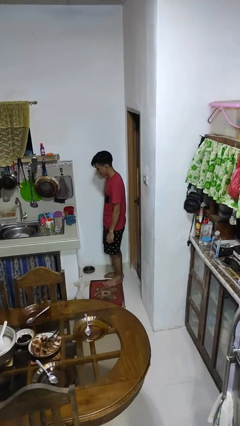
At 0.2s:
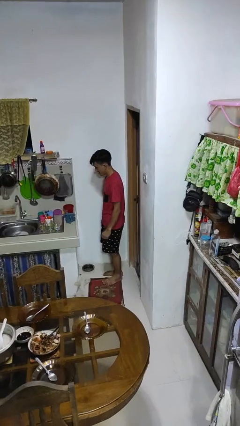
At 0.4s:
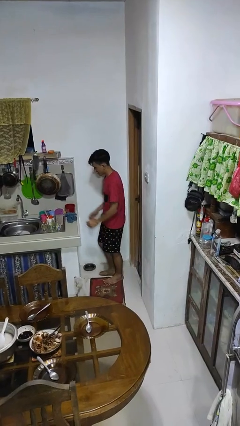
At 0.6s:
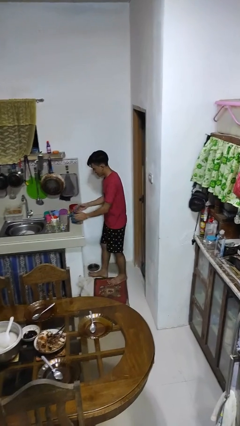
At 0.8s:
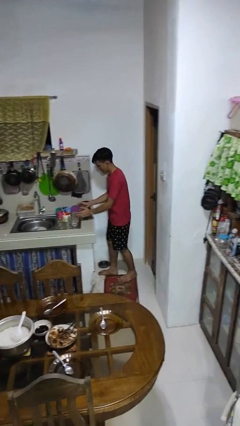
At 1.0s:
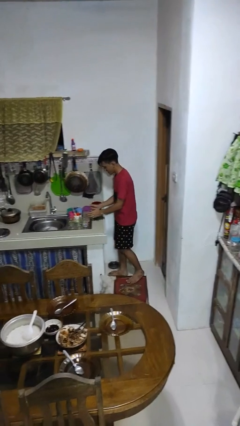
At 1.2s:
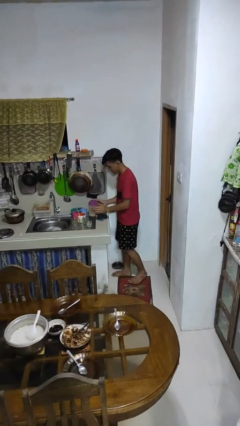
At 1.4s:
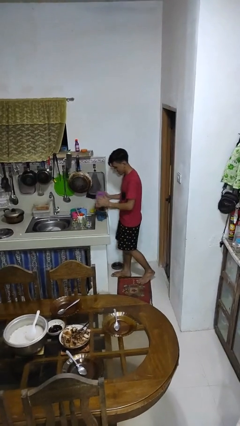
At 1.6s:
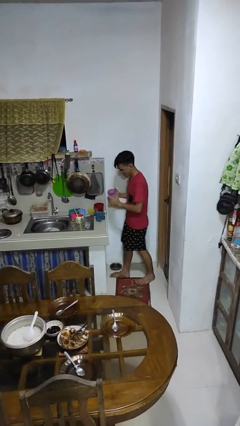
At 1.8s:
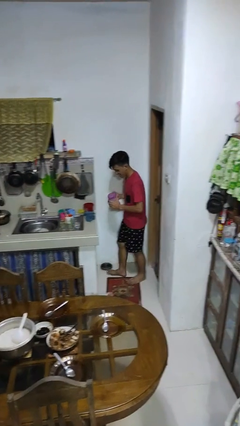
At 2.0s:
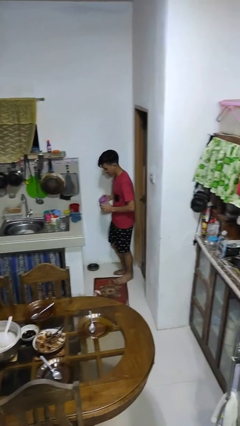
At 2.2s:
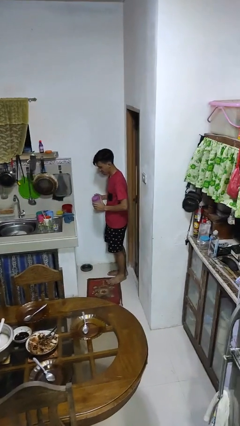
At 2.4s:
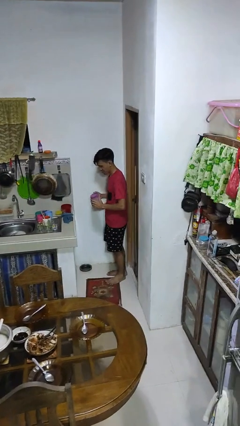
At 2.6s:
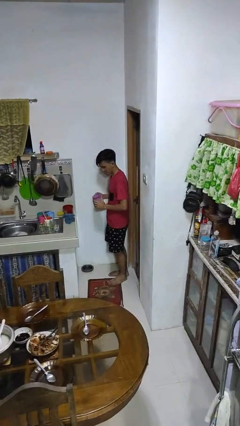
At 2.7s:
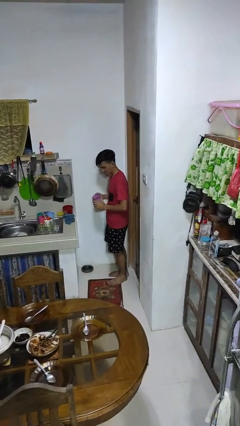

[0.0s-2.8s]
person picks up object from countertop

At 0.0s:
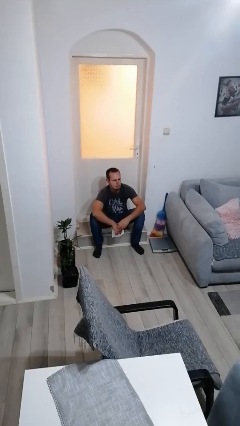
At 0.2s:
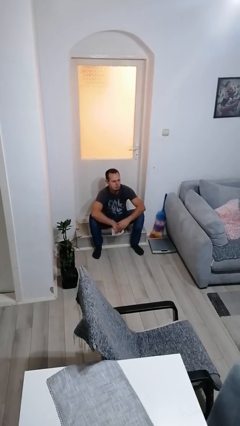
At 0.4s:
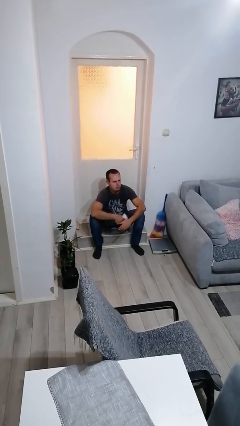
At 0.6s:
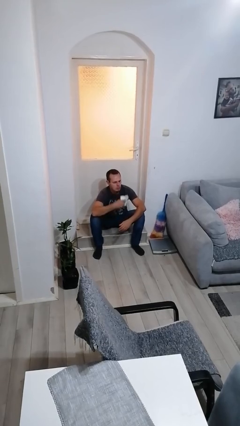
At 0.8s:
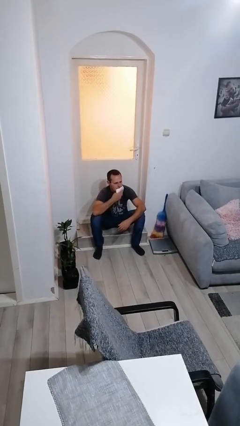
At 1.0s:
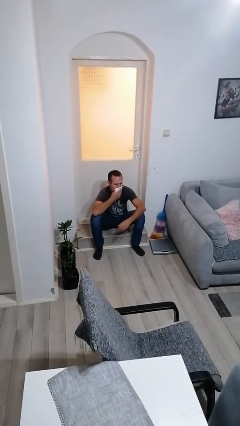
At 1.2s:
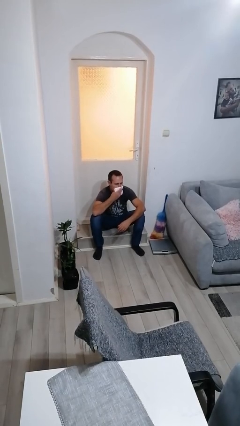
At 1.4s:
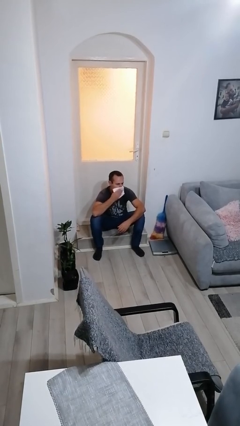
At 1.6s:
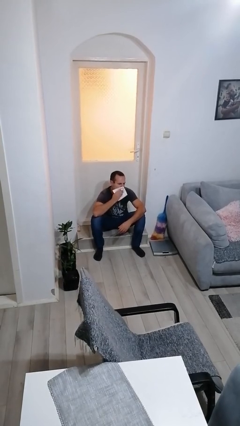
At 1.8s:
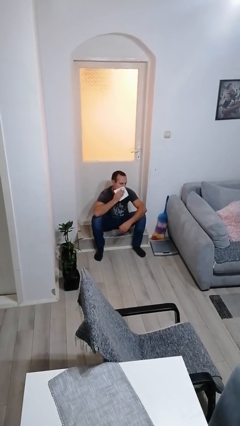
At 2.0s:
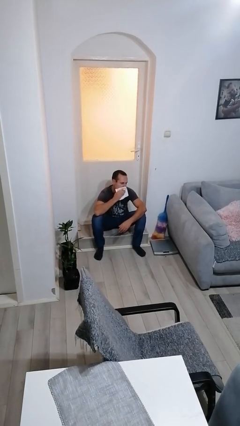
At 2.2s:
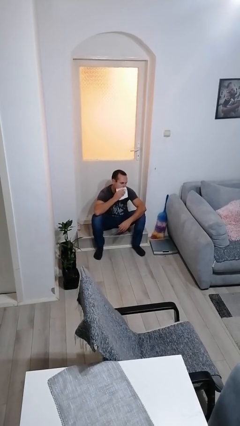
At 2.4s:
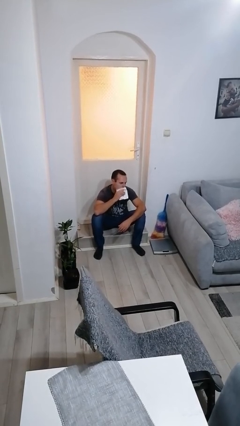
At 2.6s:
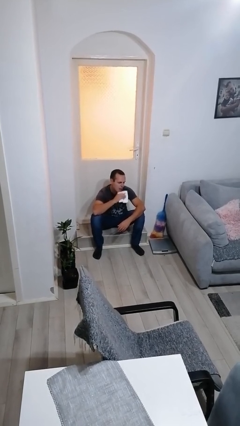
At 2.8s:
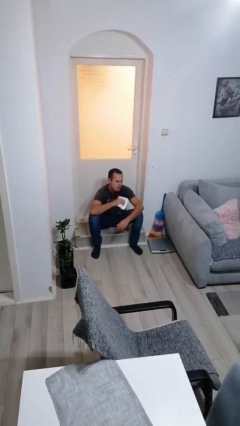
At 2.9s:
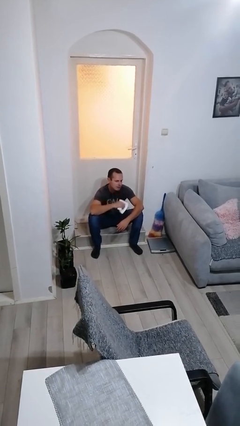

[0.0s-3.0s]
person wipes mouth with napkin

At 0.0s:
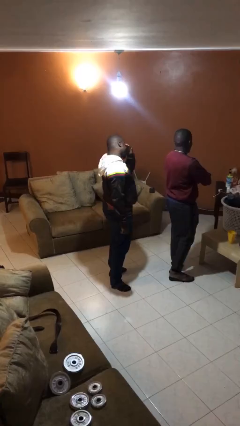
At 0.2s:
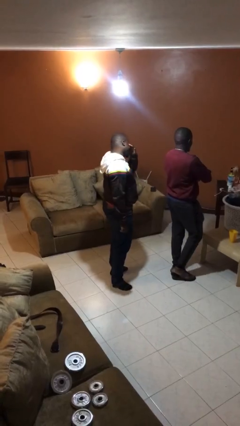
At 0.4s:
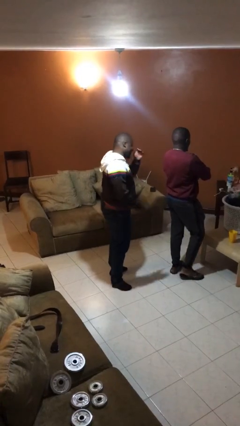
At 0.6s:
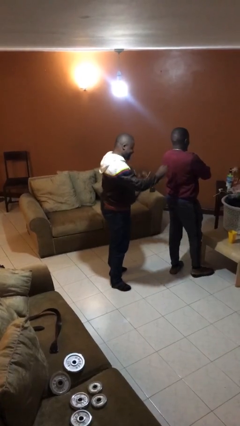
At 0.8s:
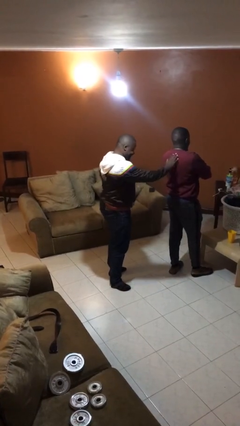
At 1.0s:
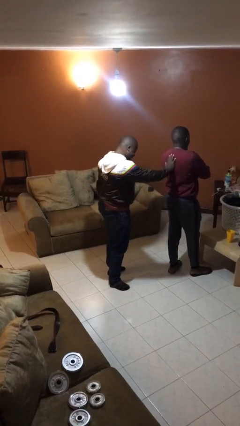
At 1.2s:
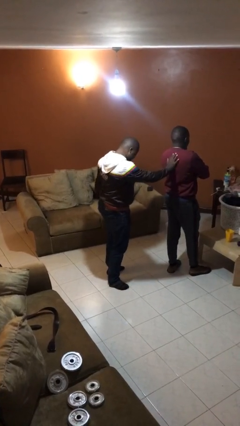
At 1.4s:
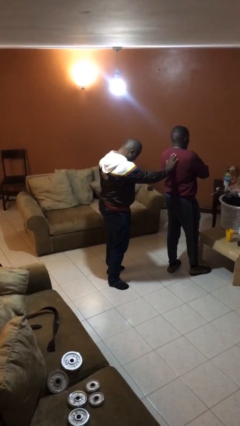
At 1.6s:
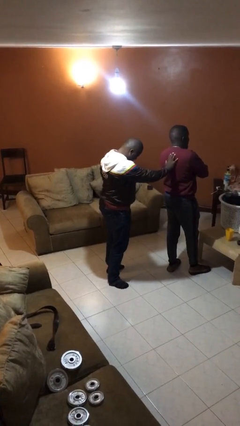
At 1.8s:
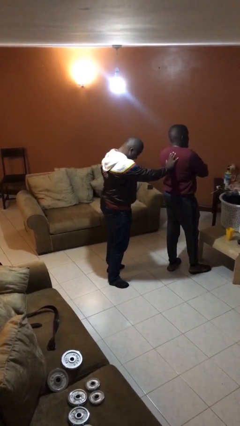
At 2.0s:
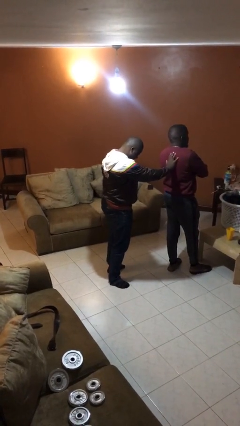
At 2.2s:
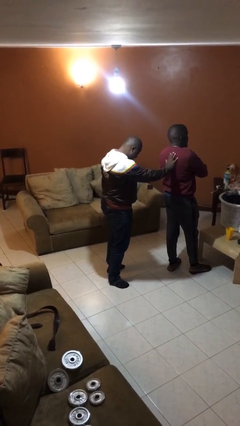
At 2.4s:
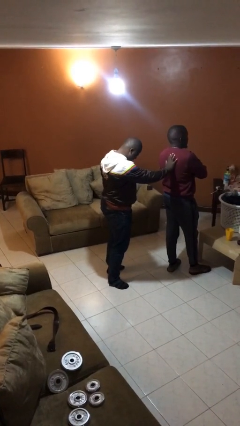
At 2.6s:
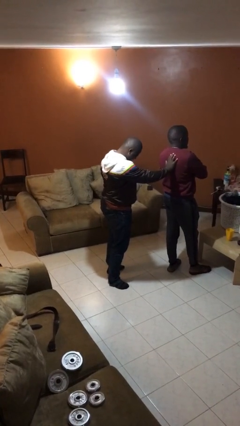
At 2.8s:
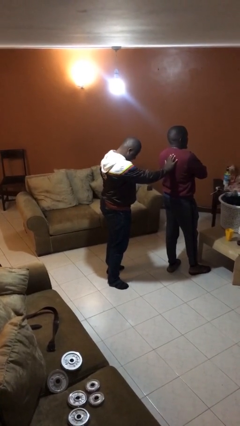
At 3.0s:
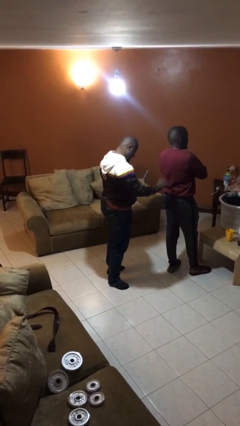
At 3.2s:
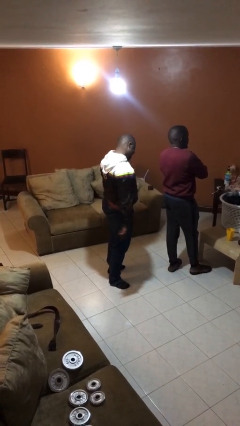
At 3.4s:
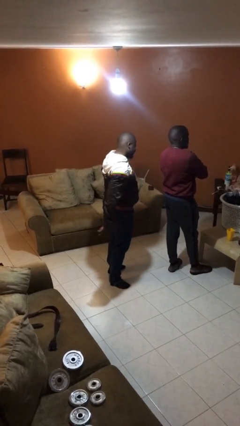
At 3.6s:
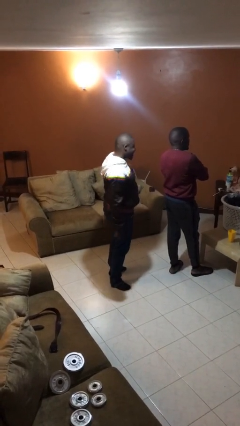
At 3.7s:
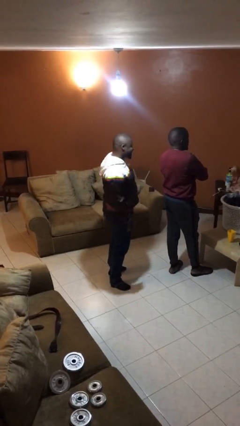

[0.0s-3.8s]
person touches back of person

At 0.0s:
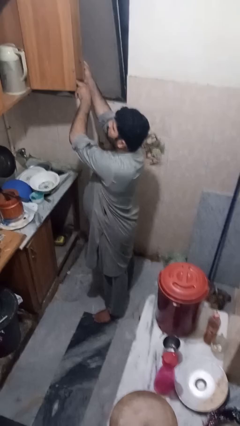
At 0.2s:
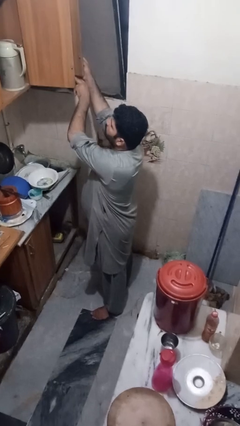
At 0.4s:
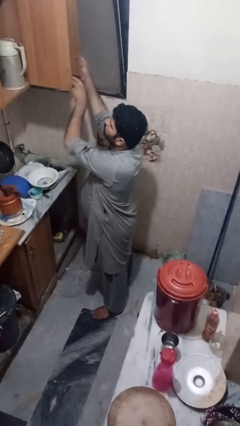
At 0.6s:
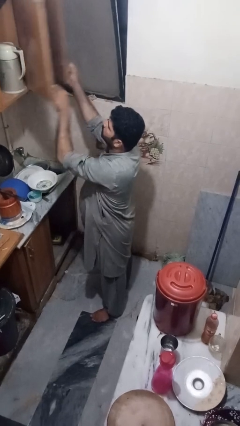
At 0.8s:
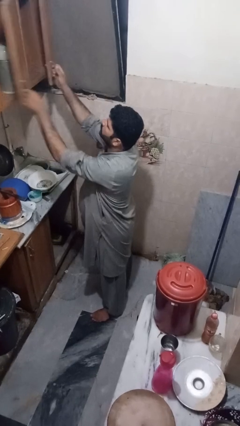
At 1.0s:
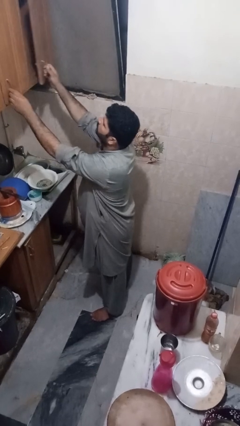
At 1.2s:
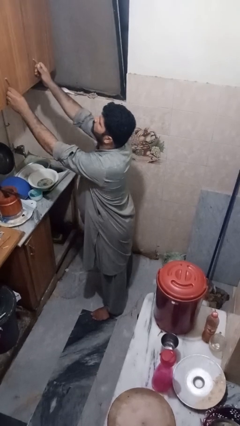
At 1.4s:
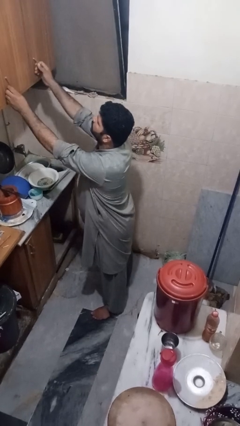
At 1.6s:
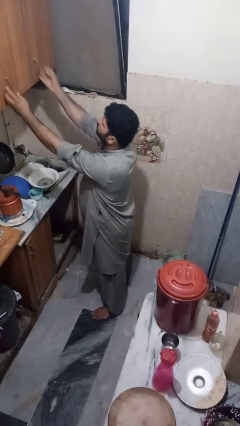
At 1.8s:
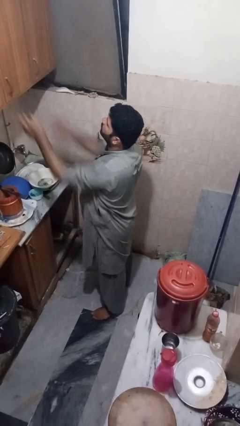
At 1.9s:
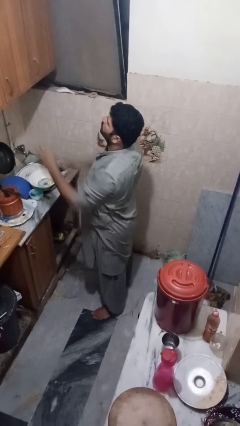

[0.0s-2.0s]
person closes cabinet

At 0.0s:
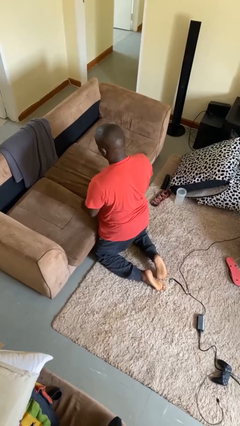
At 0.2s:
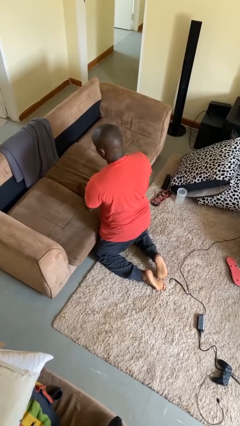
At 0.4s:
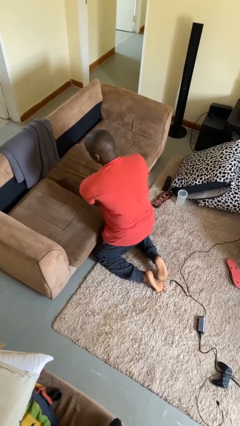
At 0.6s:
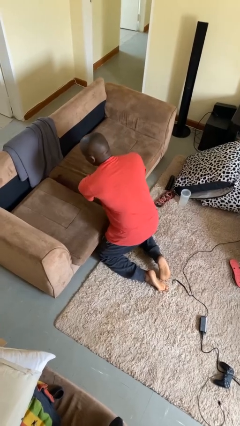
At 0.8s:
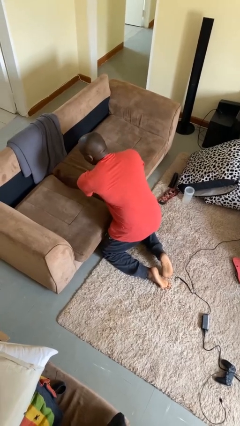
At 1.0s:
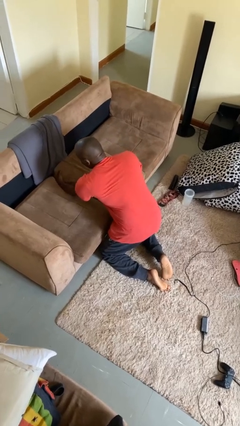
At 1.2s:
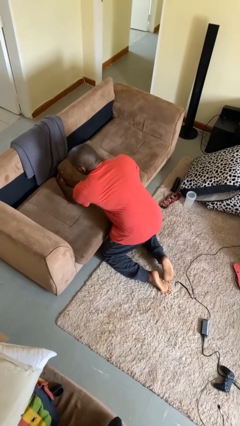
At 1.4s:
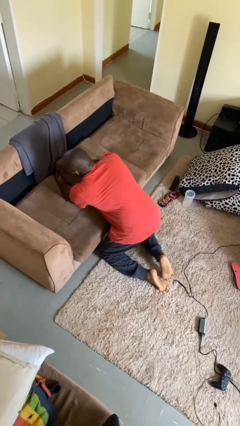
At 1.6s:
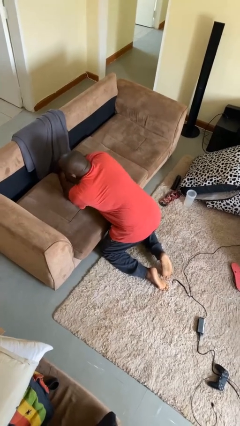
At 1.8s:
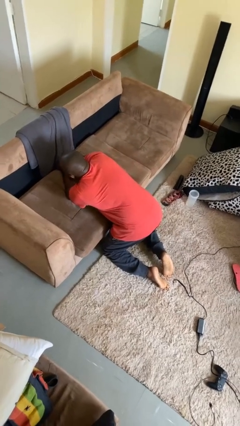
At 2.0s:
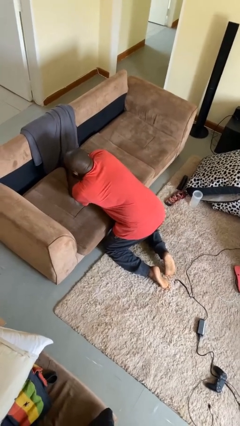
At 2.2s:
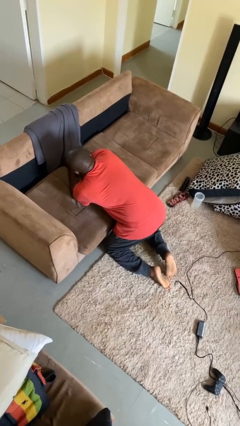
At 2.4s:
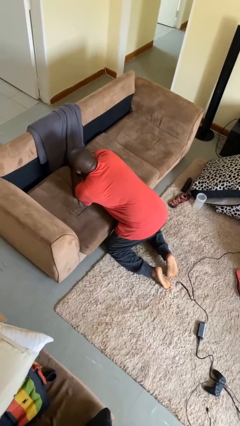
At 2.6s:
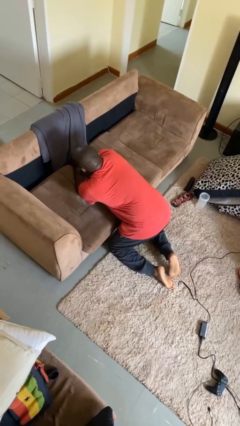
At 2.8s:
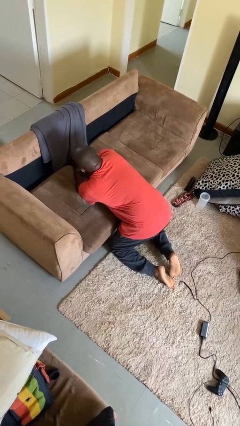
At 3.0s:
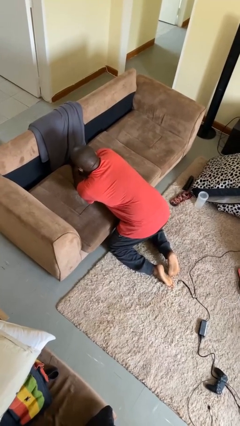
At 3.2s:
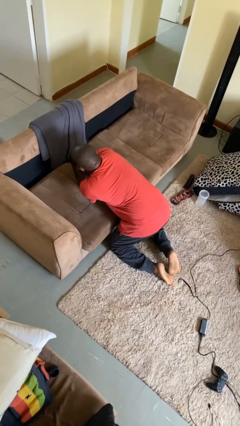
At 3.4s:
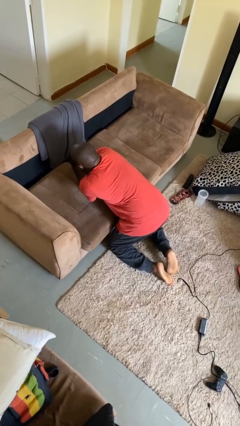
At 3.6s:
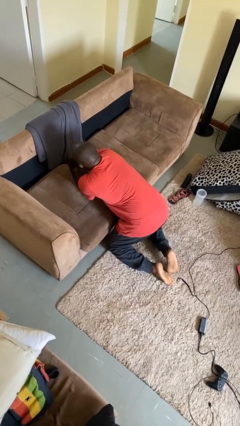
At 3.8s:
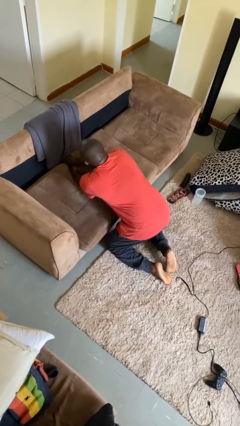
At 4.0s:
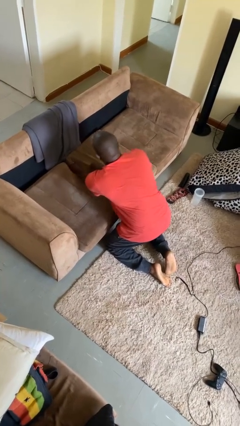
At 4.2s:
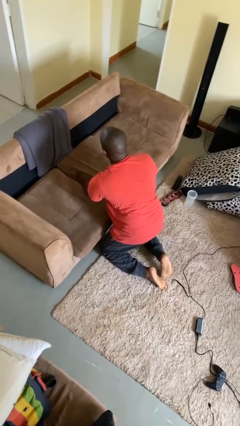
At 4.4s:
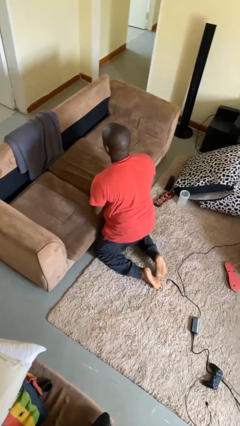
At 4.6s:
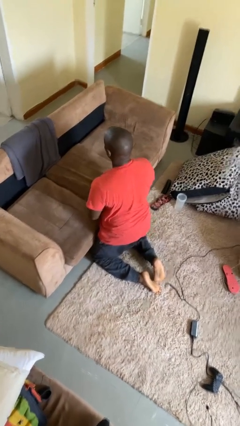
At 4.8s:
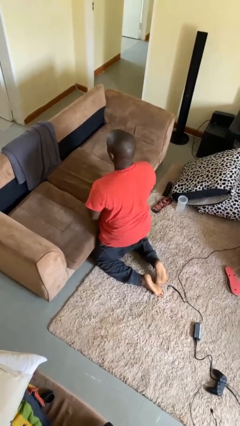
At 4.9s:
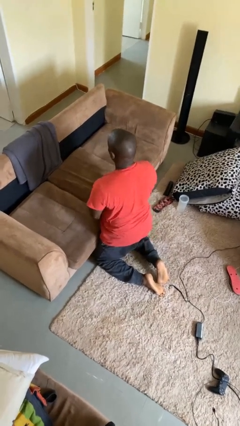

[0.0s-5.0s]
person searches in couch

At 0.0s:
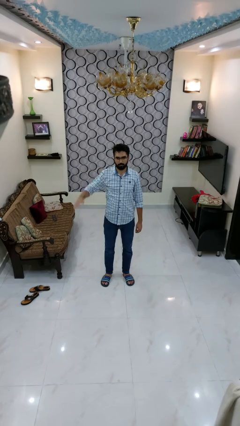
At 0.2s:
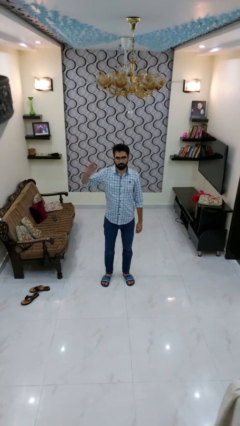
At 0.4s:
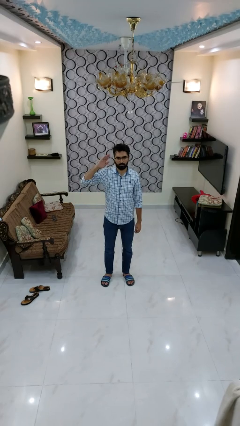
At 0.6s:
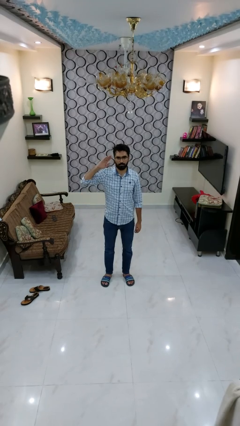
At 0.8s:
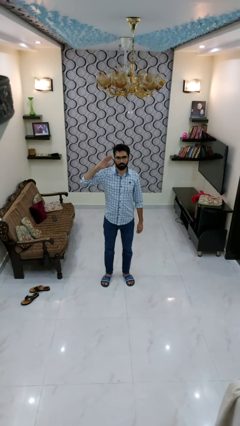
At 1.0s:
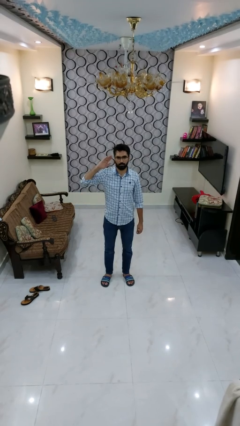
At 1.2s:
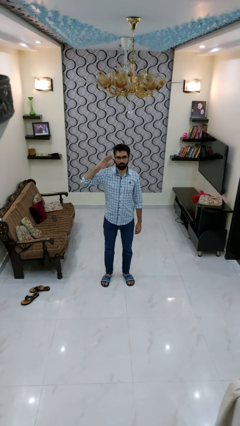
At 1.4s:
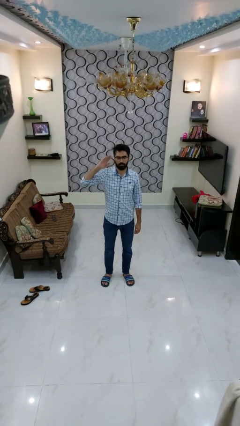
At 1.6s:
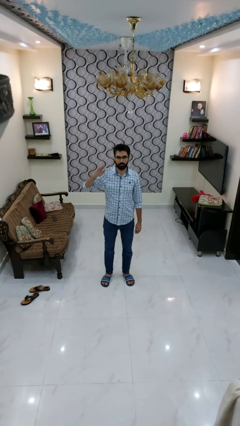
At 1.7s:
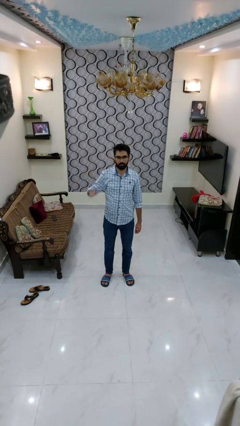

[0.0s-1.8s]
person salutes
